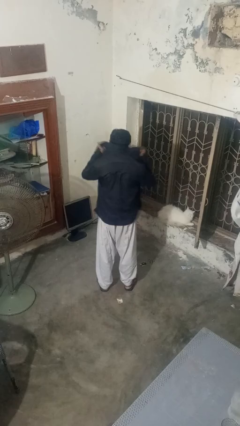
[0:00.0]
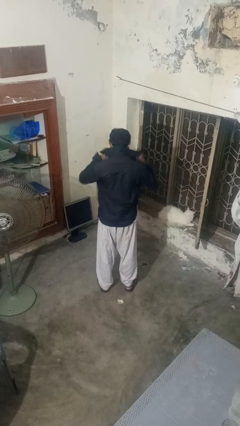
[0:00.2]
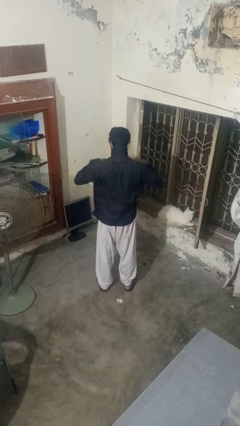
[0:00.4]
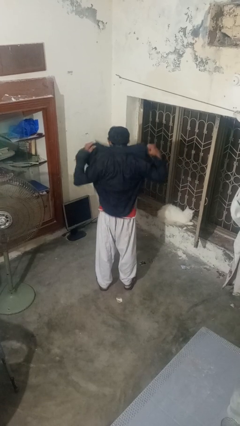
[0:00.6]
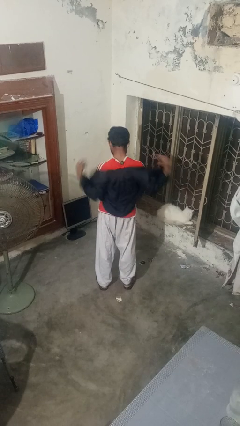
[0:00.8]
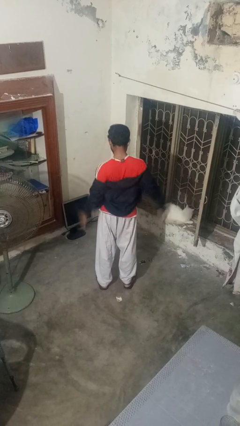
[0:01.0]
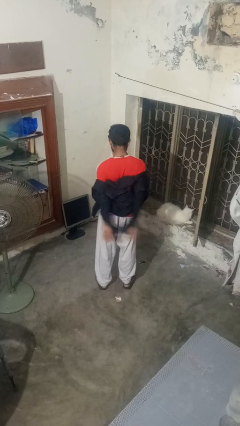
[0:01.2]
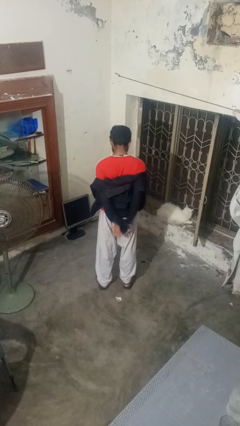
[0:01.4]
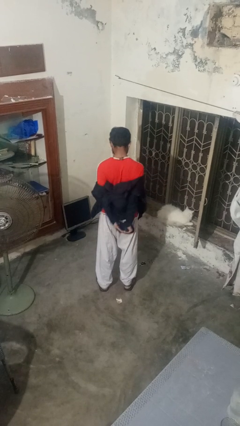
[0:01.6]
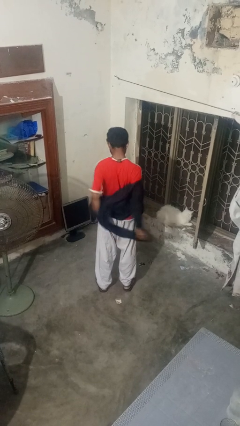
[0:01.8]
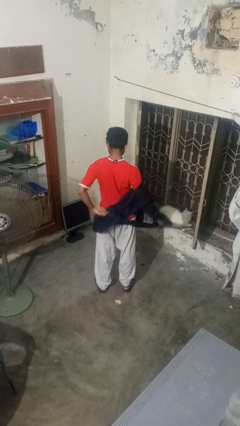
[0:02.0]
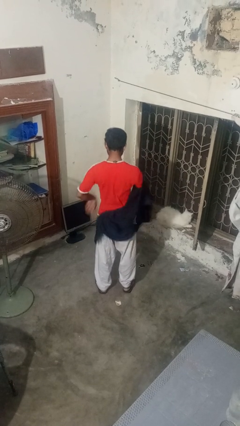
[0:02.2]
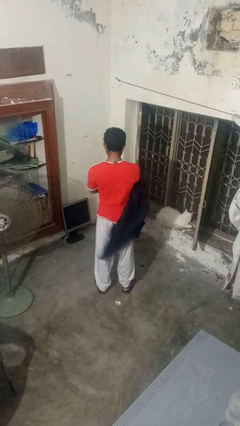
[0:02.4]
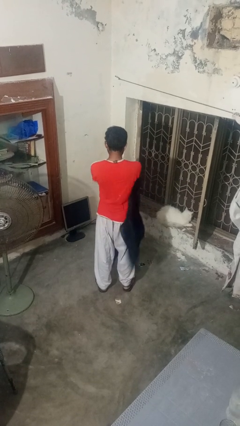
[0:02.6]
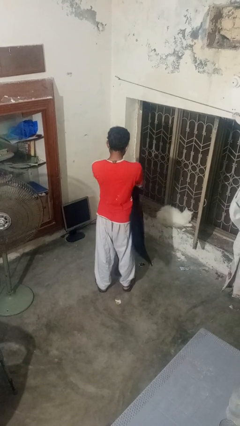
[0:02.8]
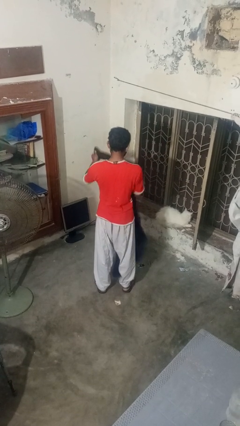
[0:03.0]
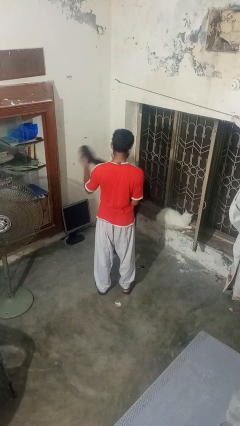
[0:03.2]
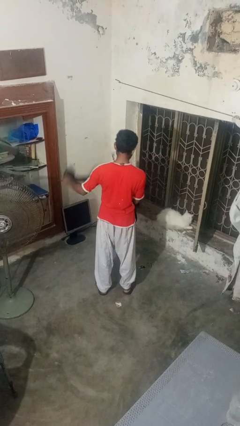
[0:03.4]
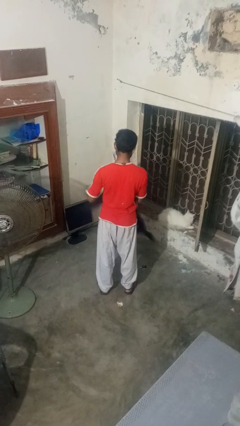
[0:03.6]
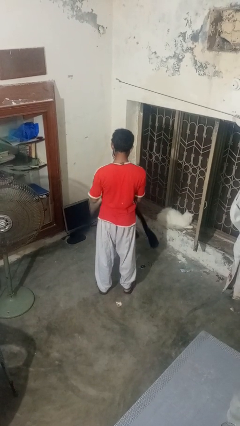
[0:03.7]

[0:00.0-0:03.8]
person takes off shirt

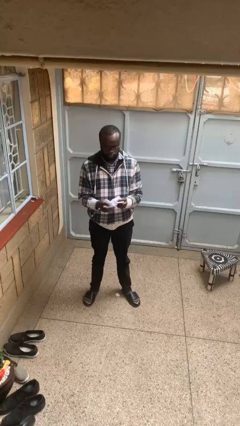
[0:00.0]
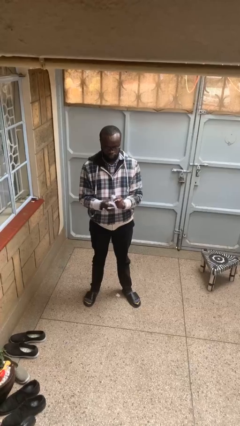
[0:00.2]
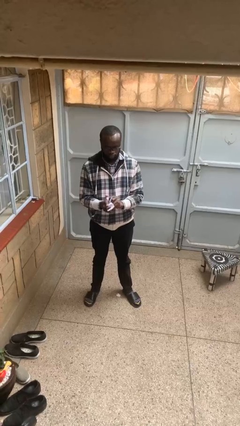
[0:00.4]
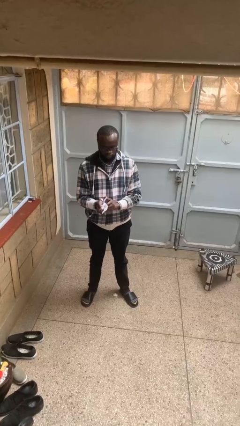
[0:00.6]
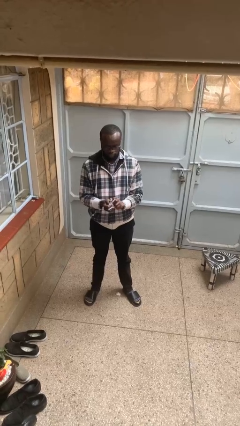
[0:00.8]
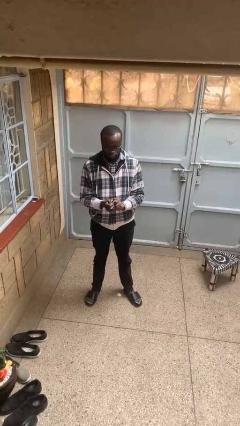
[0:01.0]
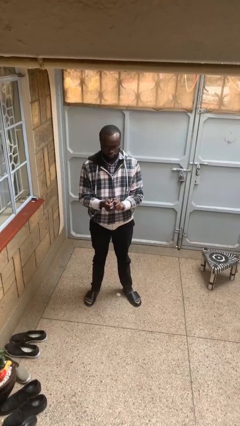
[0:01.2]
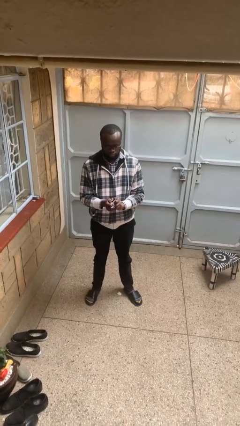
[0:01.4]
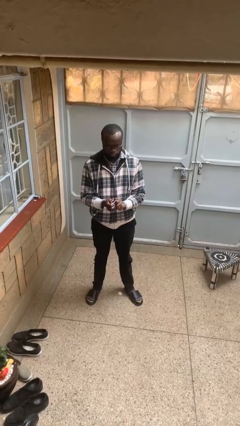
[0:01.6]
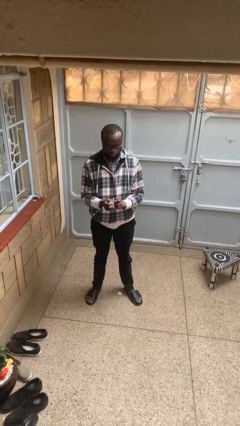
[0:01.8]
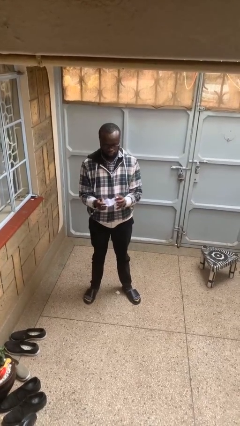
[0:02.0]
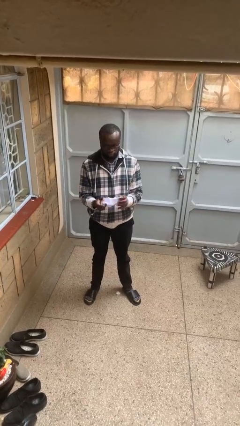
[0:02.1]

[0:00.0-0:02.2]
person crumples paper

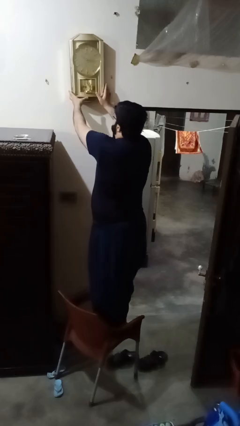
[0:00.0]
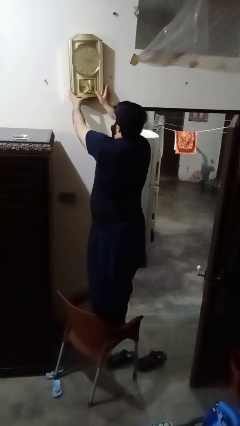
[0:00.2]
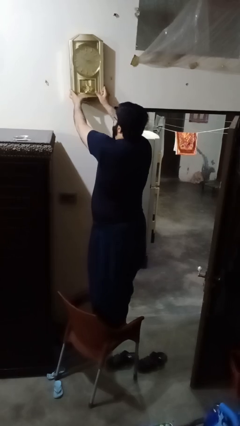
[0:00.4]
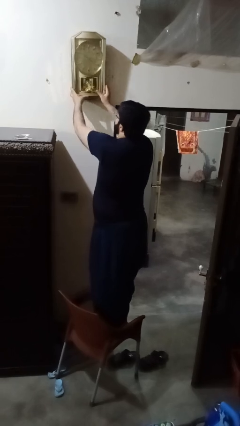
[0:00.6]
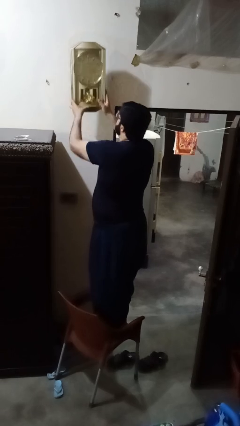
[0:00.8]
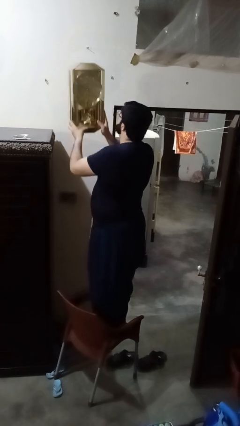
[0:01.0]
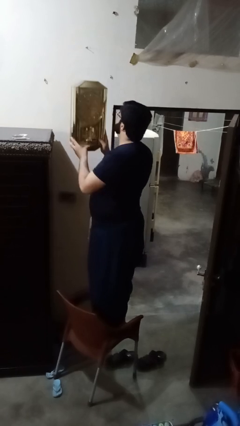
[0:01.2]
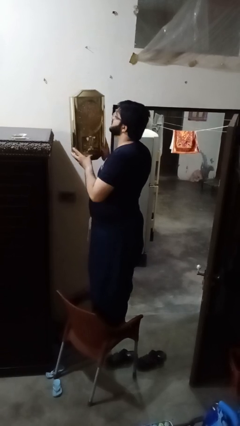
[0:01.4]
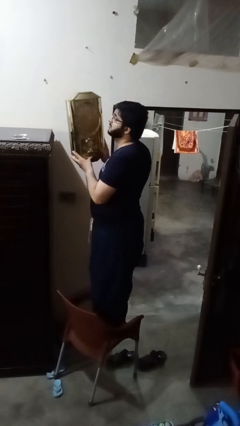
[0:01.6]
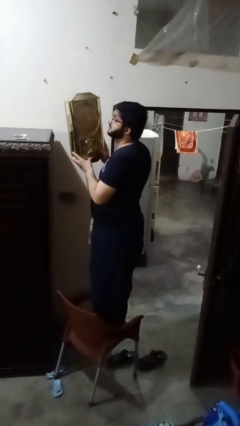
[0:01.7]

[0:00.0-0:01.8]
person takes down smoke detector

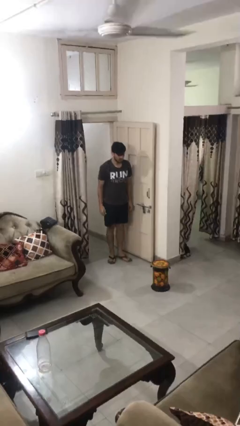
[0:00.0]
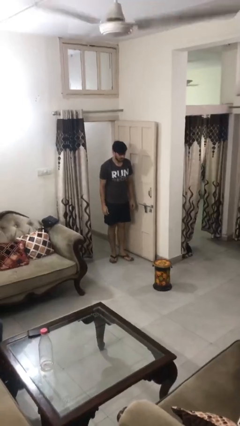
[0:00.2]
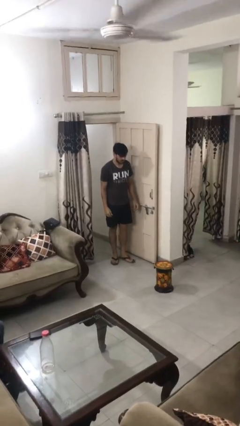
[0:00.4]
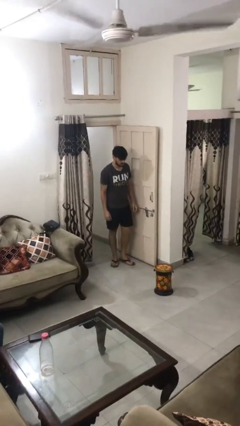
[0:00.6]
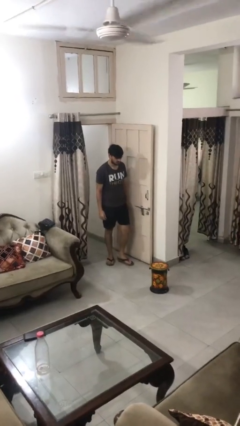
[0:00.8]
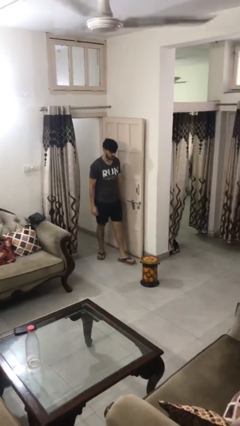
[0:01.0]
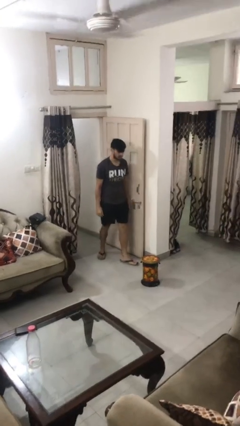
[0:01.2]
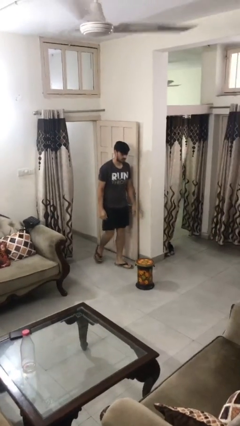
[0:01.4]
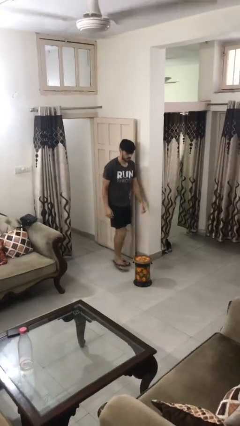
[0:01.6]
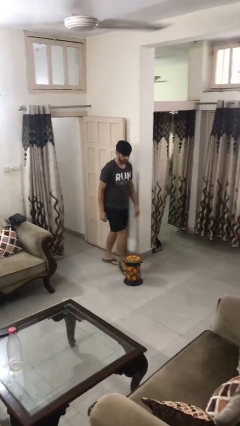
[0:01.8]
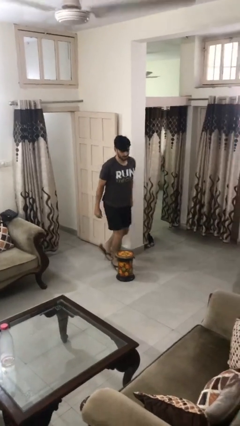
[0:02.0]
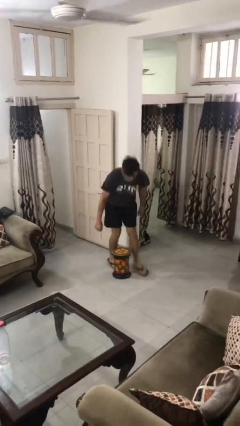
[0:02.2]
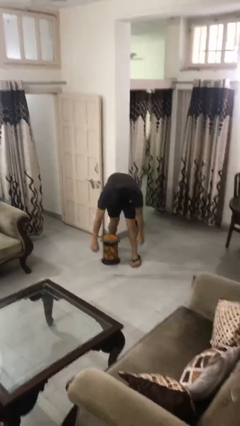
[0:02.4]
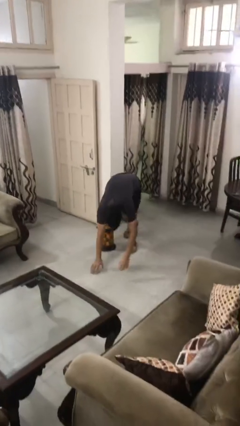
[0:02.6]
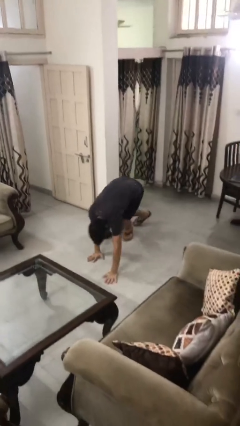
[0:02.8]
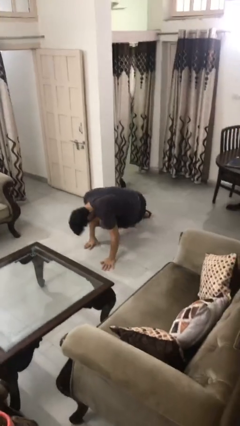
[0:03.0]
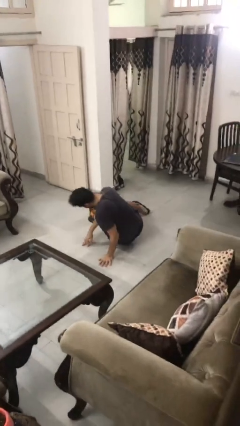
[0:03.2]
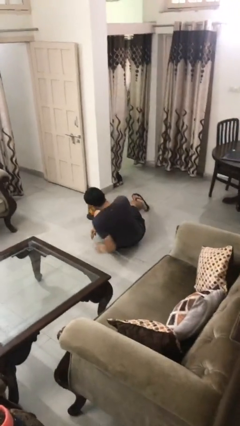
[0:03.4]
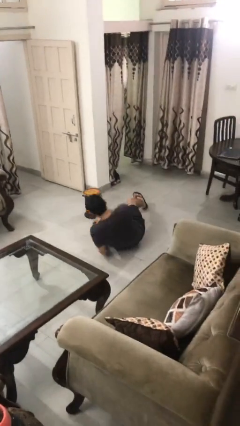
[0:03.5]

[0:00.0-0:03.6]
person trips on object on floor

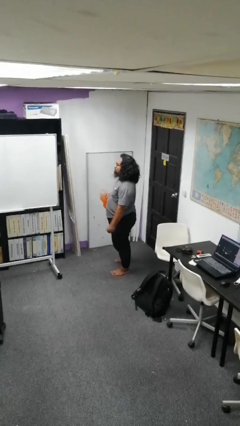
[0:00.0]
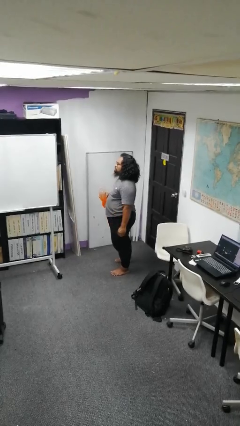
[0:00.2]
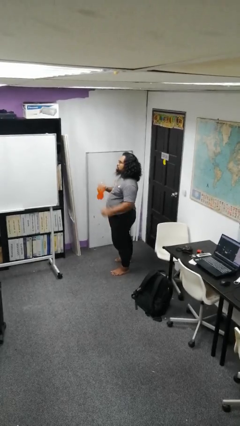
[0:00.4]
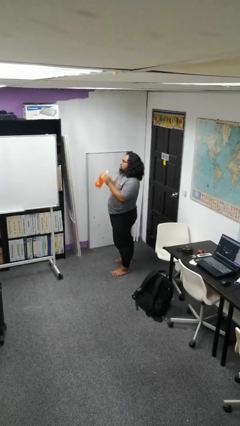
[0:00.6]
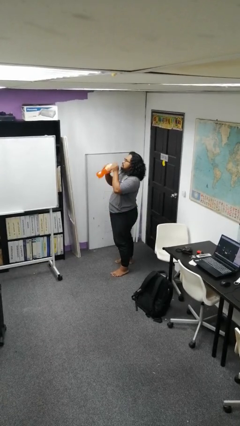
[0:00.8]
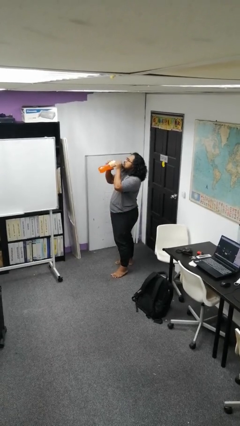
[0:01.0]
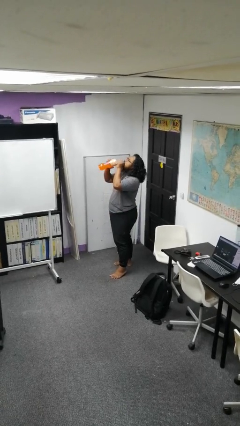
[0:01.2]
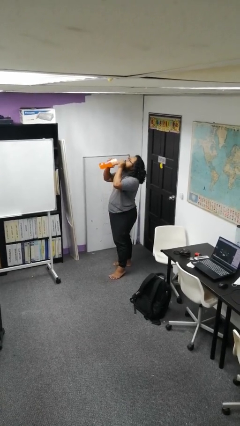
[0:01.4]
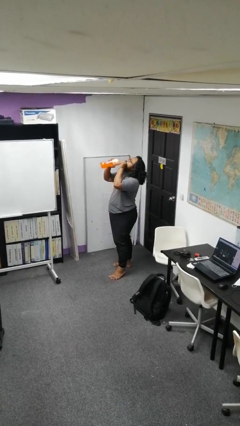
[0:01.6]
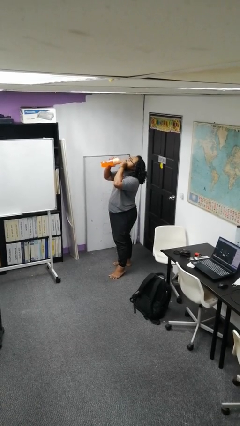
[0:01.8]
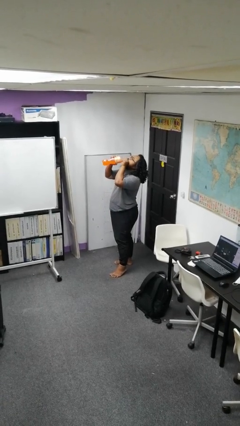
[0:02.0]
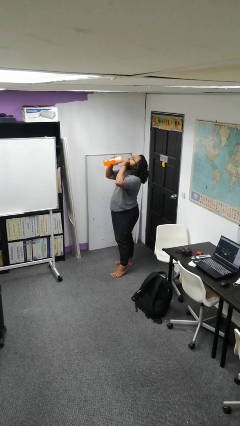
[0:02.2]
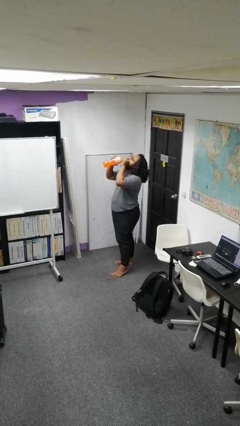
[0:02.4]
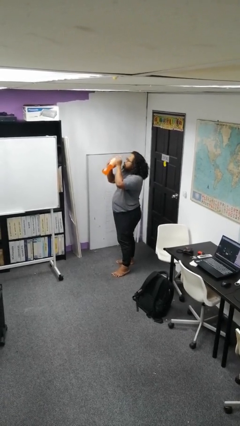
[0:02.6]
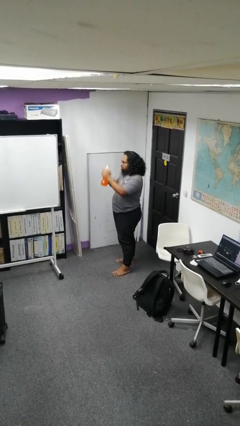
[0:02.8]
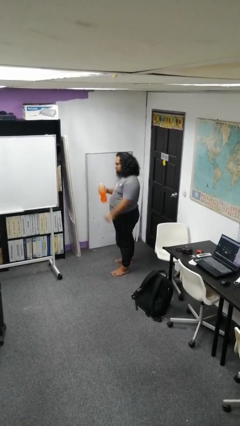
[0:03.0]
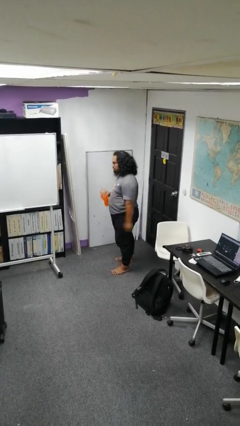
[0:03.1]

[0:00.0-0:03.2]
person drinks from bottle

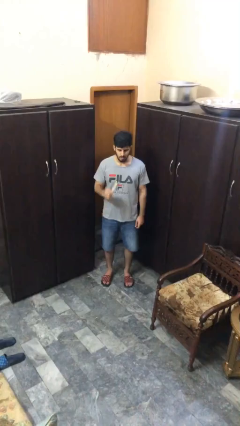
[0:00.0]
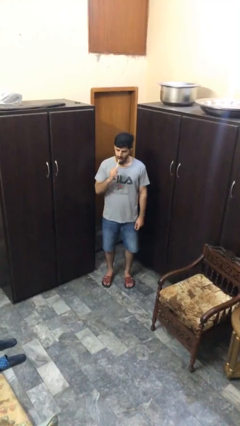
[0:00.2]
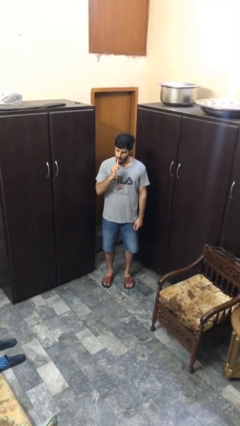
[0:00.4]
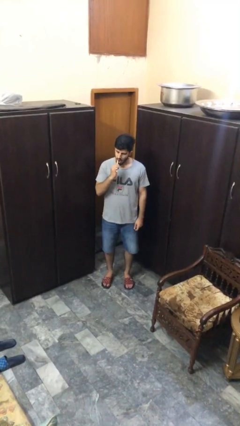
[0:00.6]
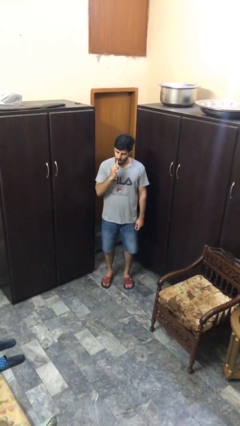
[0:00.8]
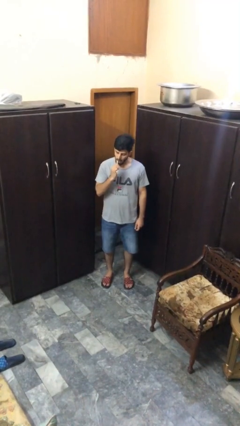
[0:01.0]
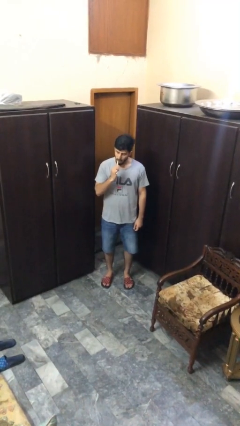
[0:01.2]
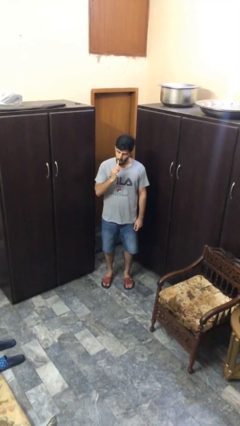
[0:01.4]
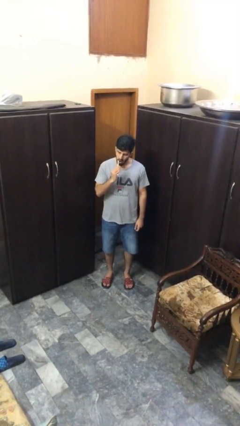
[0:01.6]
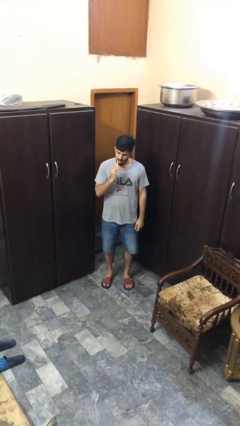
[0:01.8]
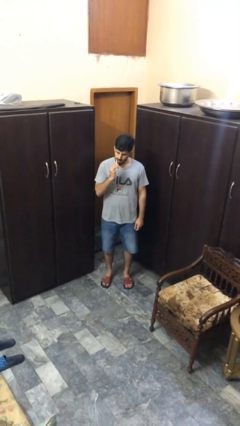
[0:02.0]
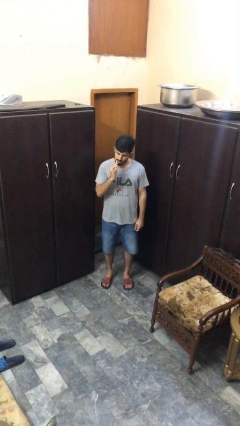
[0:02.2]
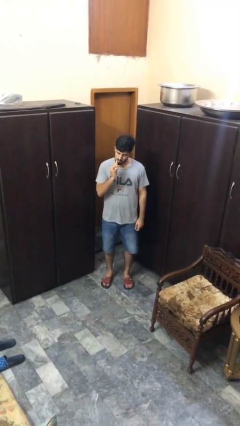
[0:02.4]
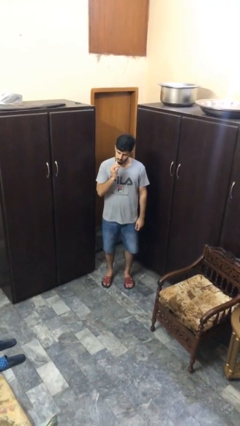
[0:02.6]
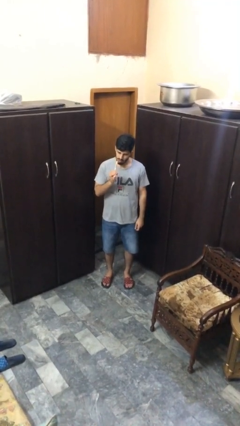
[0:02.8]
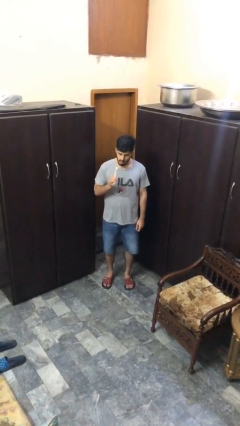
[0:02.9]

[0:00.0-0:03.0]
person brushes teeth
